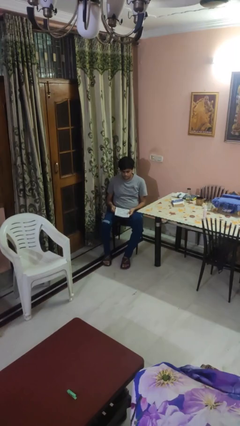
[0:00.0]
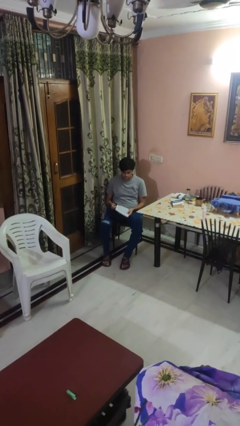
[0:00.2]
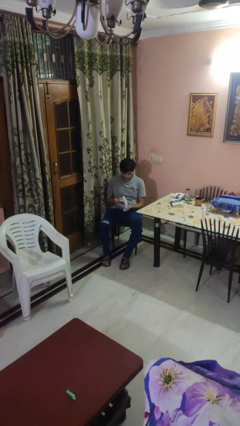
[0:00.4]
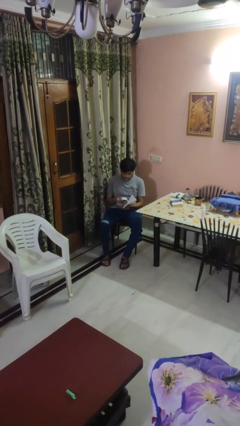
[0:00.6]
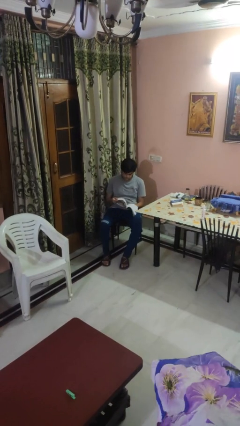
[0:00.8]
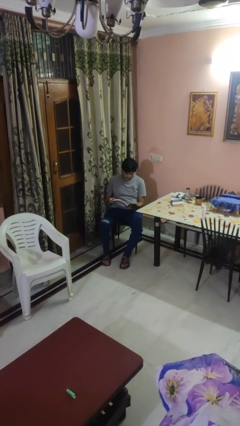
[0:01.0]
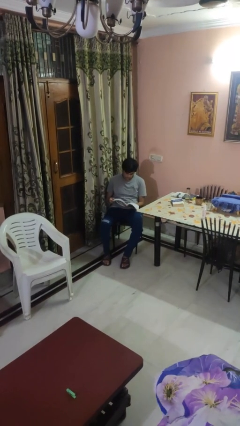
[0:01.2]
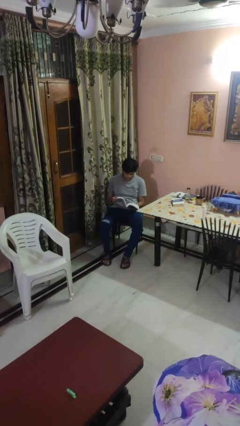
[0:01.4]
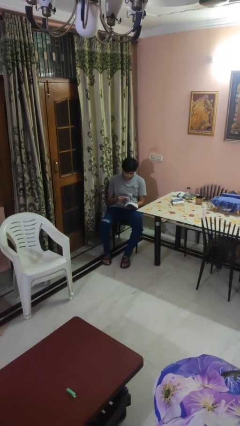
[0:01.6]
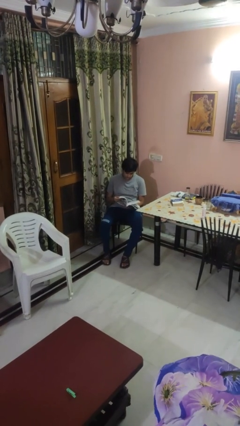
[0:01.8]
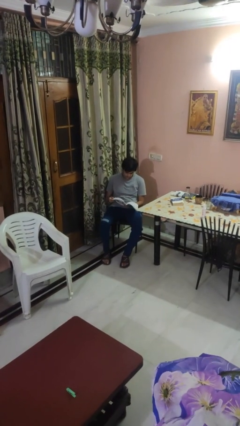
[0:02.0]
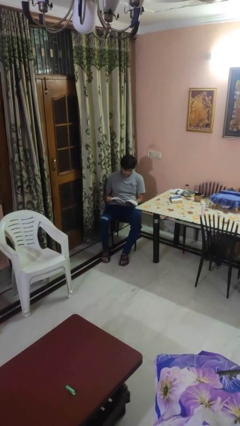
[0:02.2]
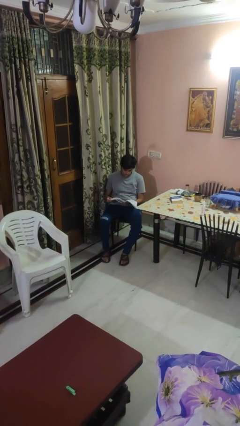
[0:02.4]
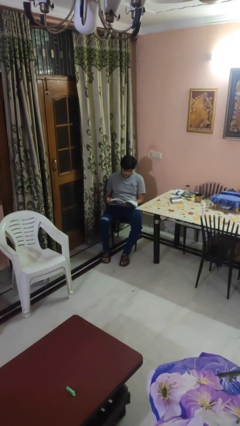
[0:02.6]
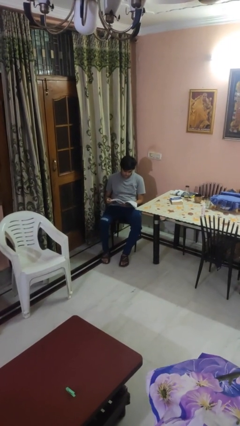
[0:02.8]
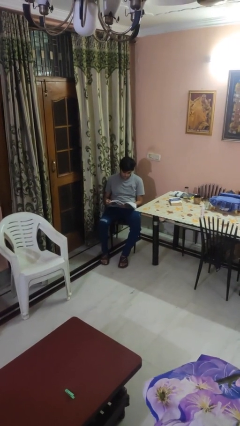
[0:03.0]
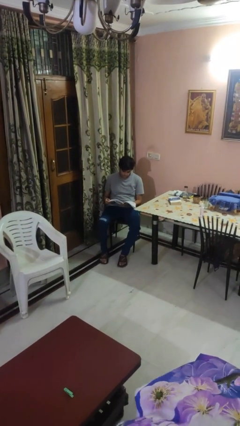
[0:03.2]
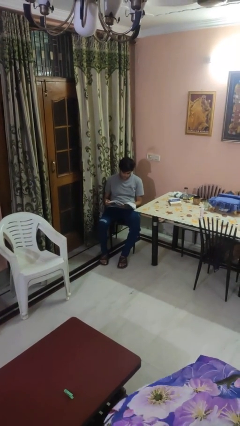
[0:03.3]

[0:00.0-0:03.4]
person reads magazine

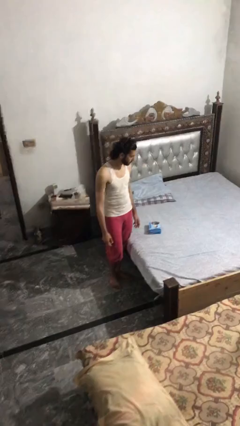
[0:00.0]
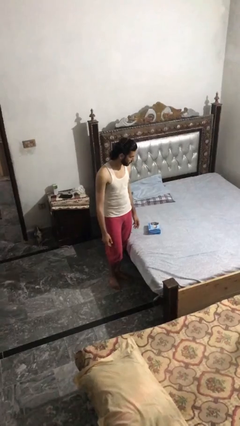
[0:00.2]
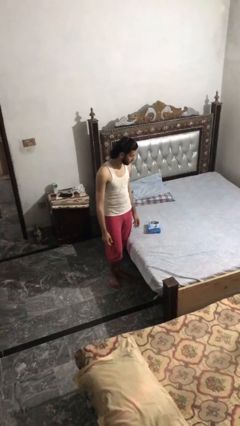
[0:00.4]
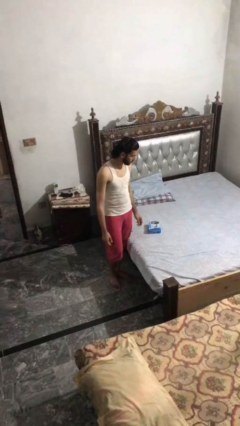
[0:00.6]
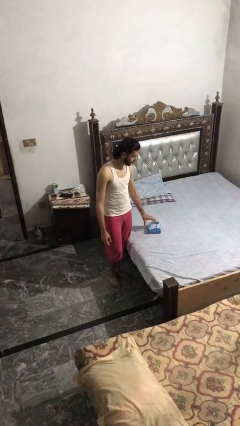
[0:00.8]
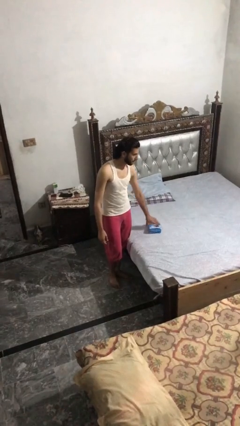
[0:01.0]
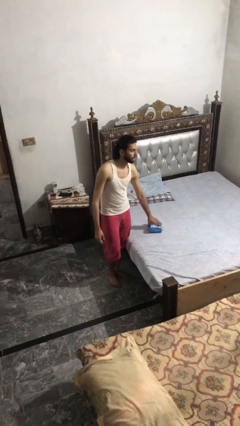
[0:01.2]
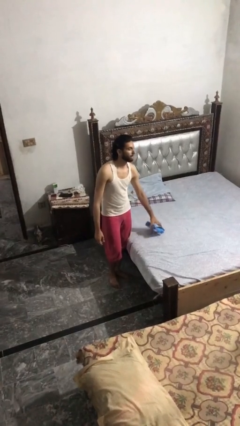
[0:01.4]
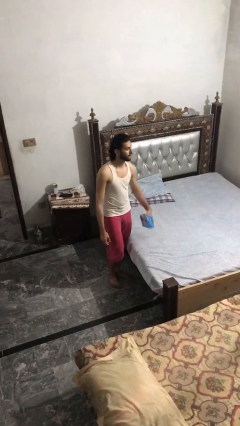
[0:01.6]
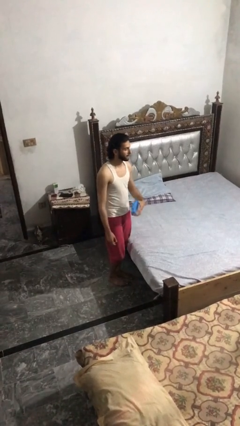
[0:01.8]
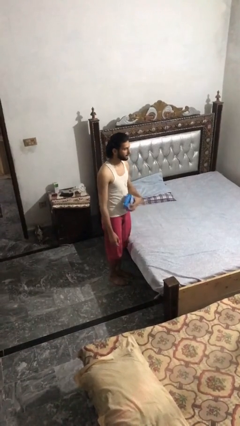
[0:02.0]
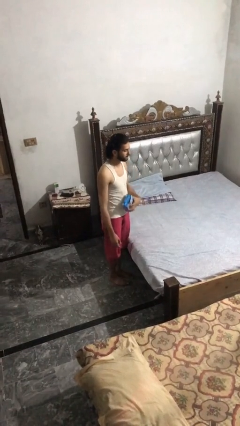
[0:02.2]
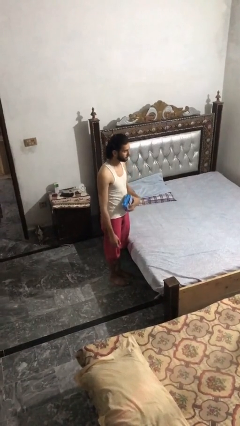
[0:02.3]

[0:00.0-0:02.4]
person picks up object from bed

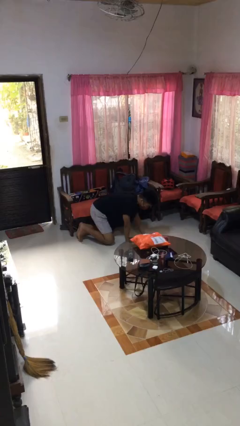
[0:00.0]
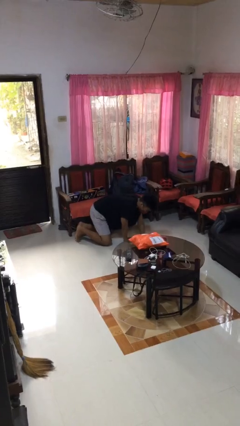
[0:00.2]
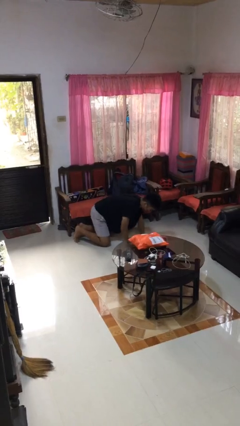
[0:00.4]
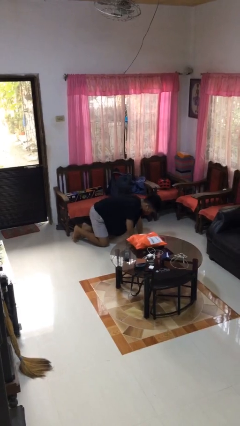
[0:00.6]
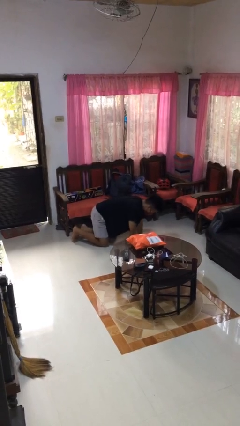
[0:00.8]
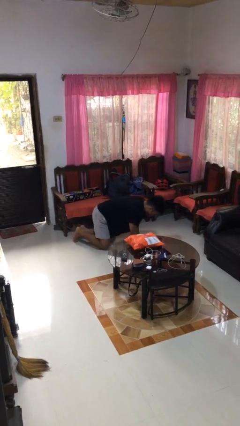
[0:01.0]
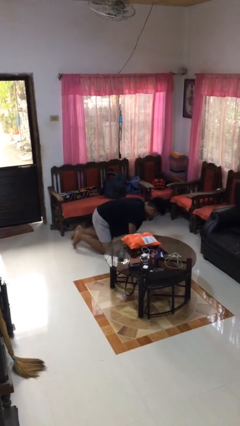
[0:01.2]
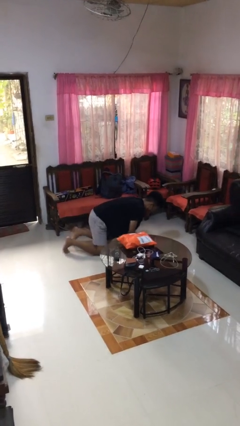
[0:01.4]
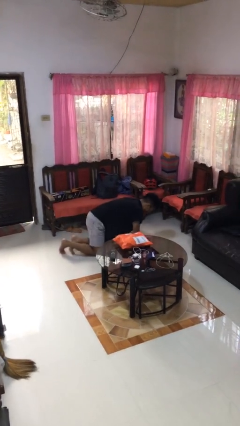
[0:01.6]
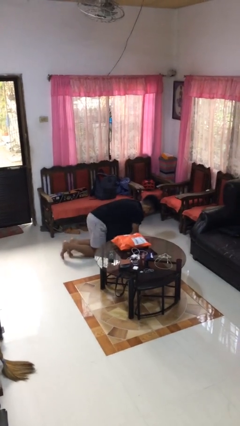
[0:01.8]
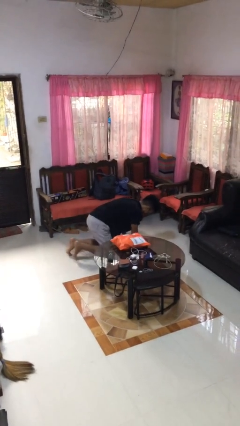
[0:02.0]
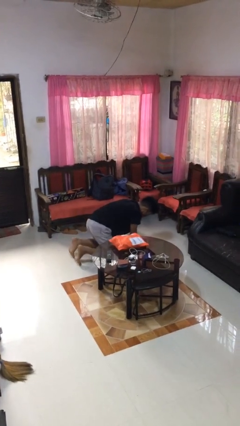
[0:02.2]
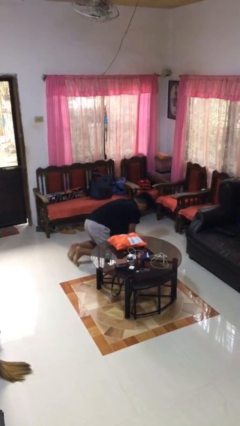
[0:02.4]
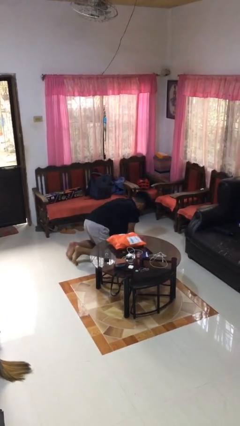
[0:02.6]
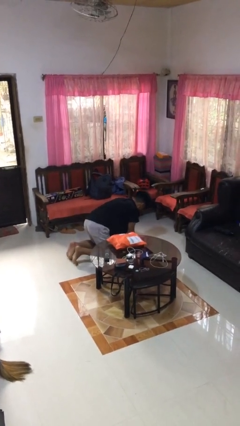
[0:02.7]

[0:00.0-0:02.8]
person crawls

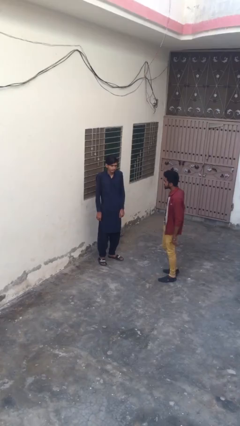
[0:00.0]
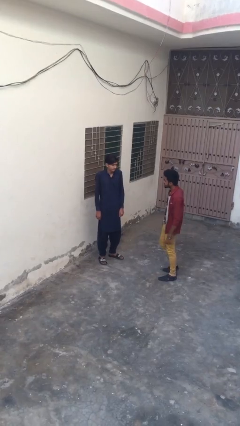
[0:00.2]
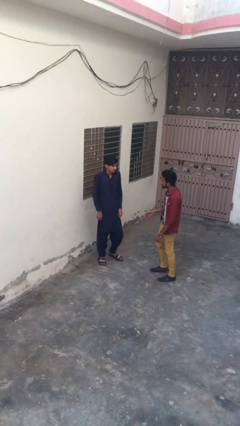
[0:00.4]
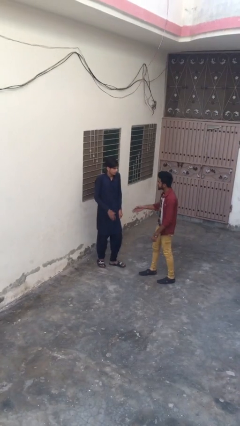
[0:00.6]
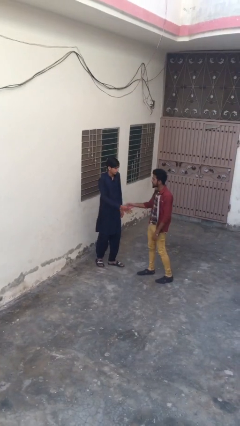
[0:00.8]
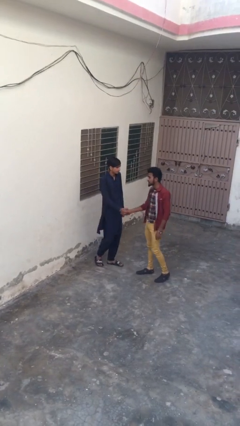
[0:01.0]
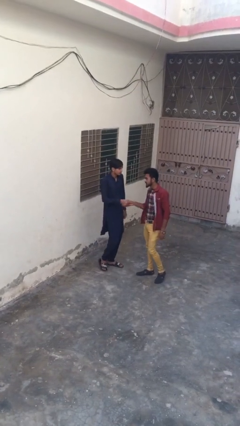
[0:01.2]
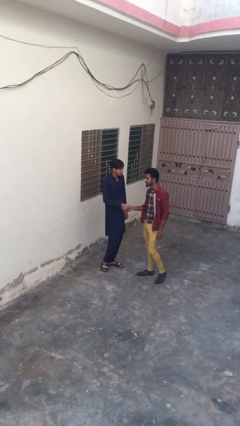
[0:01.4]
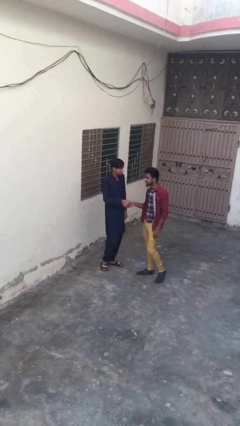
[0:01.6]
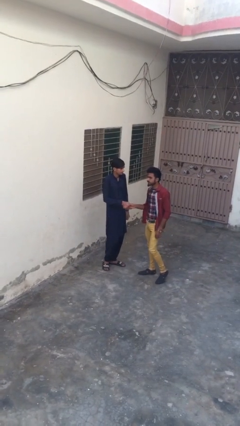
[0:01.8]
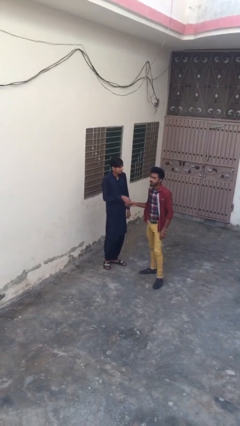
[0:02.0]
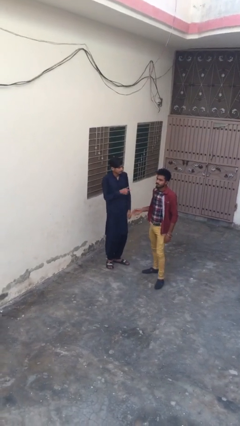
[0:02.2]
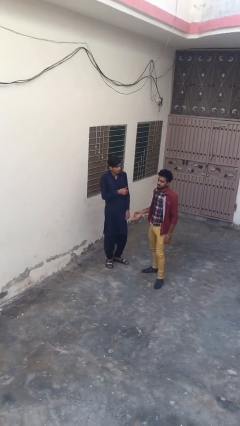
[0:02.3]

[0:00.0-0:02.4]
person shakes hand

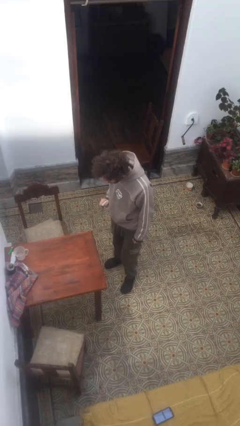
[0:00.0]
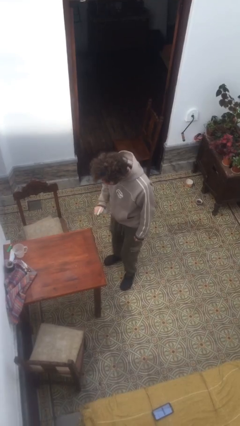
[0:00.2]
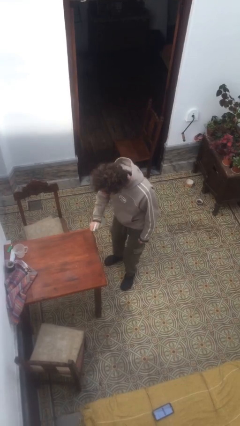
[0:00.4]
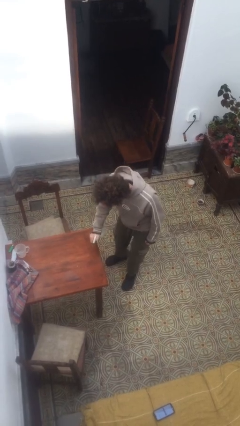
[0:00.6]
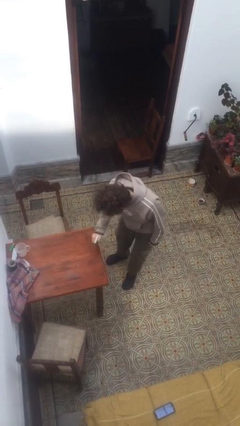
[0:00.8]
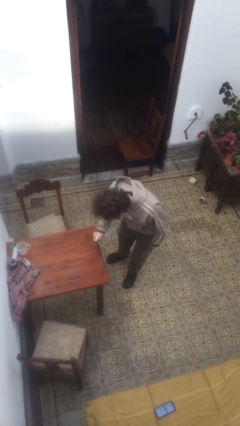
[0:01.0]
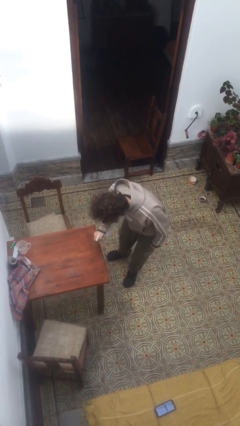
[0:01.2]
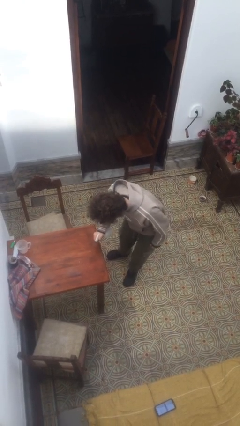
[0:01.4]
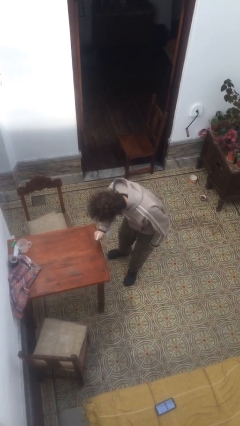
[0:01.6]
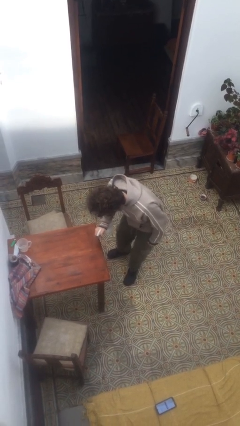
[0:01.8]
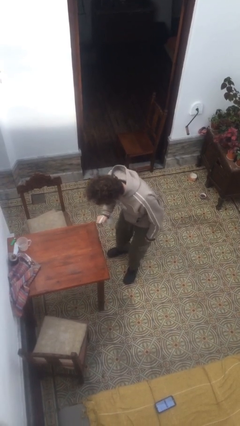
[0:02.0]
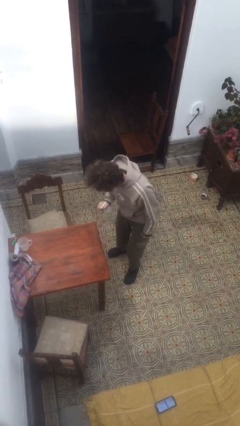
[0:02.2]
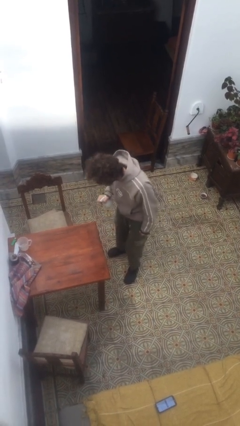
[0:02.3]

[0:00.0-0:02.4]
person sprays from bottle

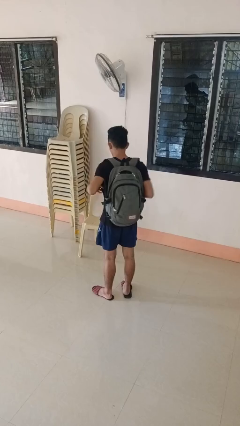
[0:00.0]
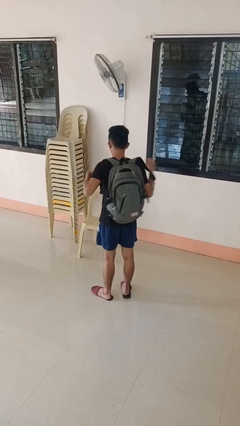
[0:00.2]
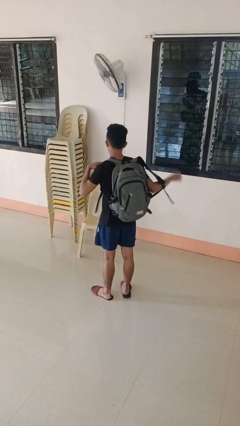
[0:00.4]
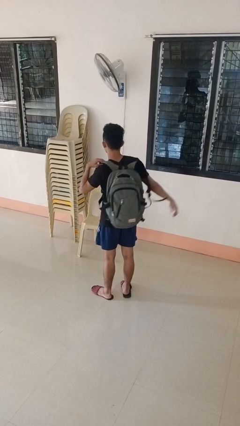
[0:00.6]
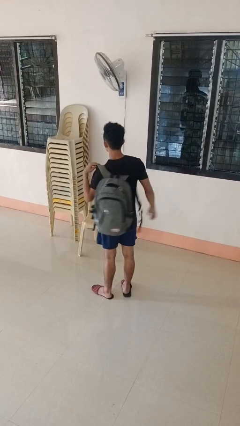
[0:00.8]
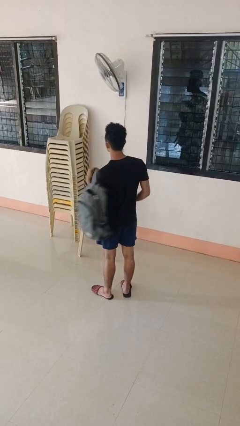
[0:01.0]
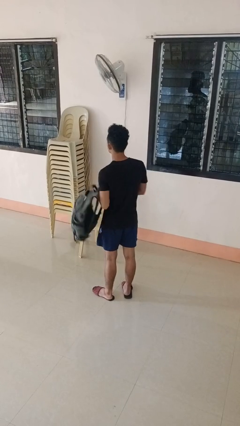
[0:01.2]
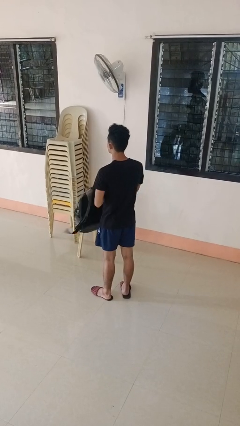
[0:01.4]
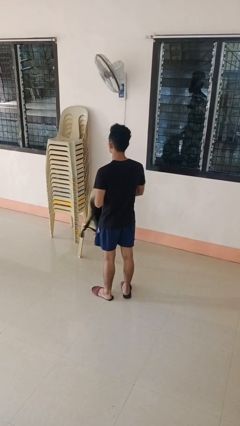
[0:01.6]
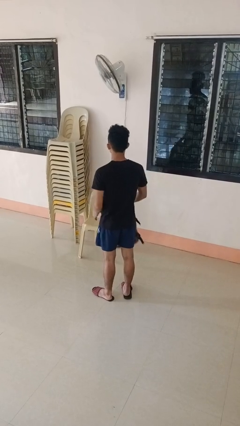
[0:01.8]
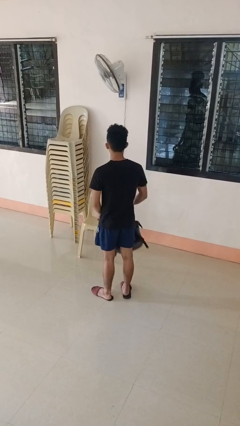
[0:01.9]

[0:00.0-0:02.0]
person takes off backpack

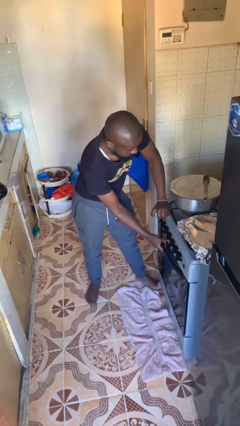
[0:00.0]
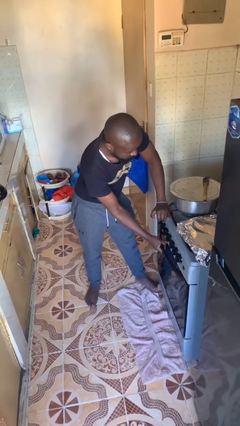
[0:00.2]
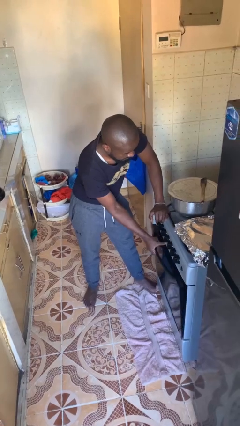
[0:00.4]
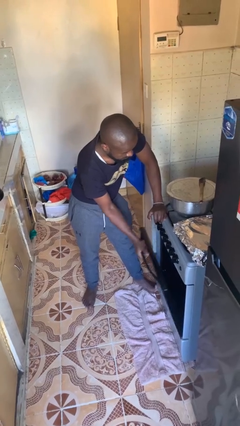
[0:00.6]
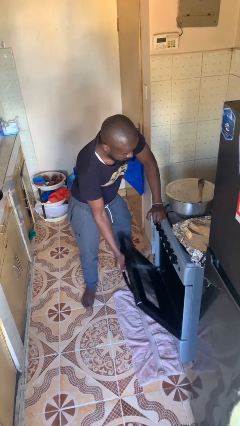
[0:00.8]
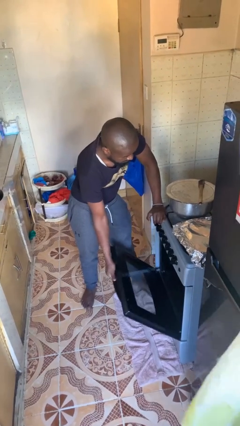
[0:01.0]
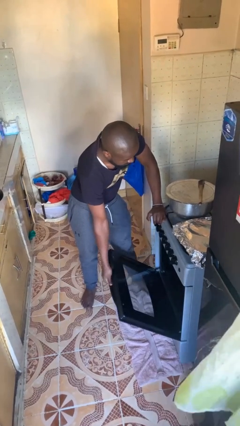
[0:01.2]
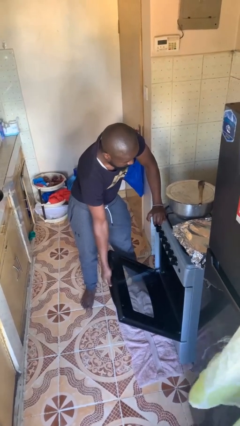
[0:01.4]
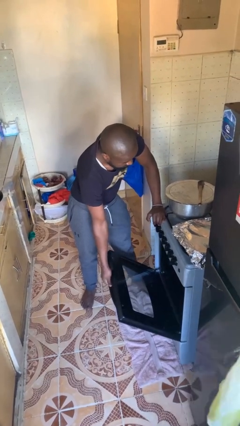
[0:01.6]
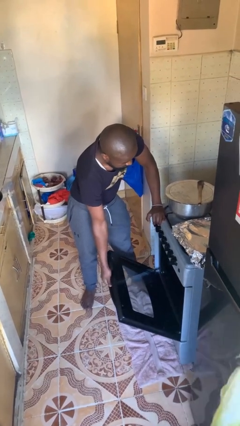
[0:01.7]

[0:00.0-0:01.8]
person opens oven door

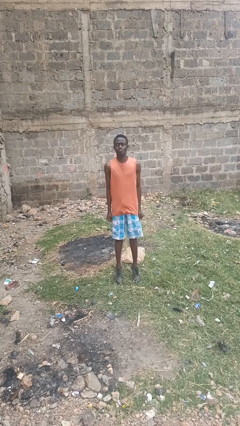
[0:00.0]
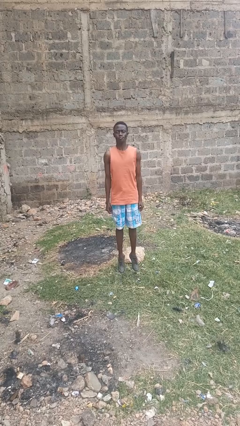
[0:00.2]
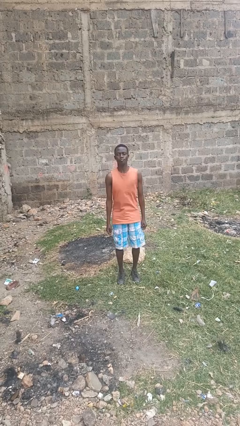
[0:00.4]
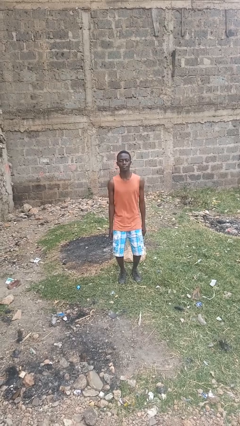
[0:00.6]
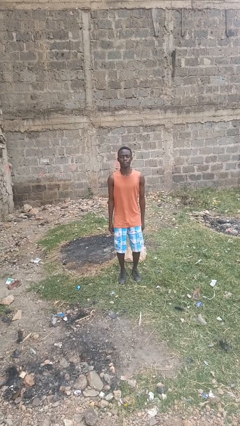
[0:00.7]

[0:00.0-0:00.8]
person jumps